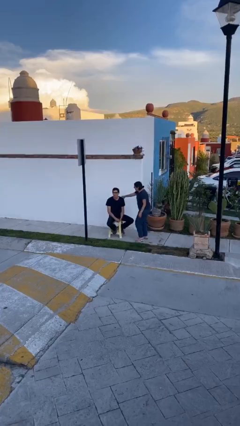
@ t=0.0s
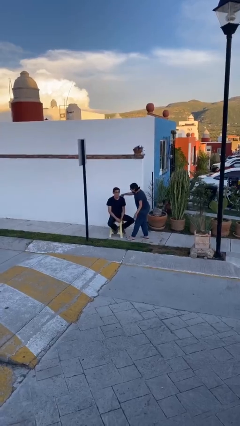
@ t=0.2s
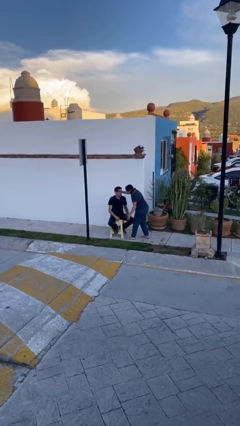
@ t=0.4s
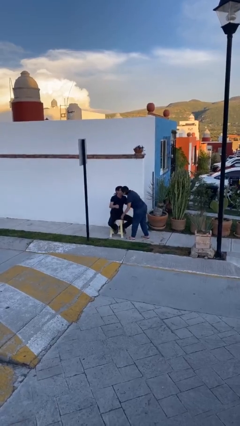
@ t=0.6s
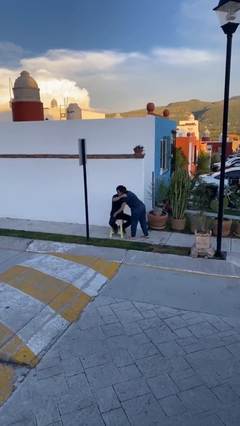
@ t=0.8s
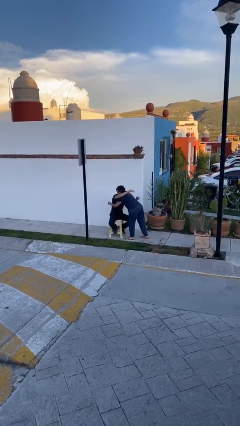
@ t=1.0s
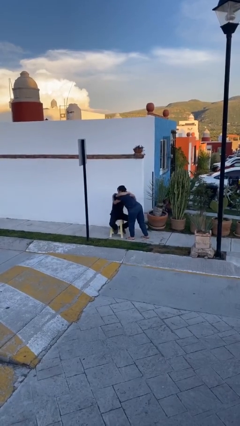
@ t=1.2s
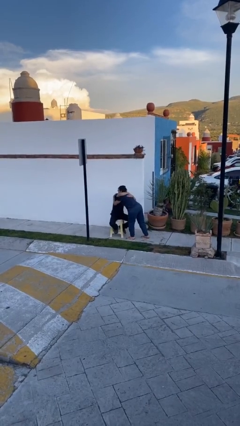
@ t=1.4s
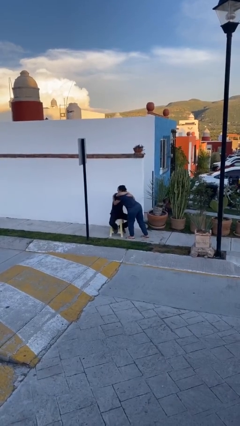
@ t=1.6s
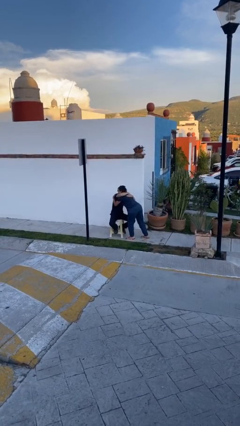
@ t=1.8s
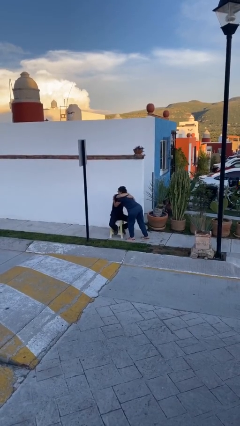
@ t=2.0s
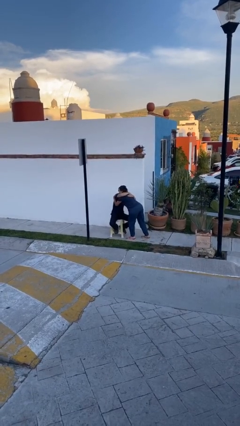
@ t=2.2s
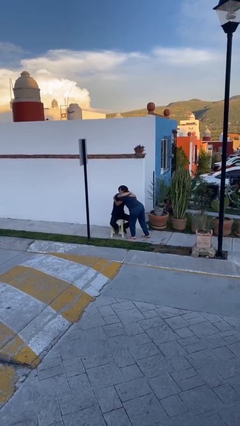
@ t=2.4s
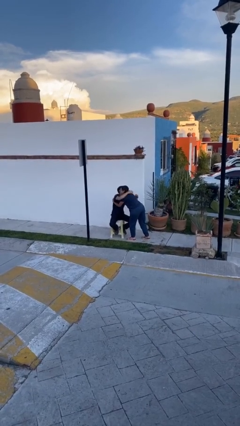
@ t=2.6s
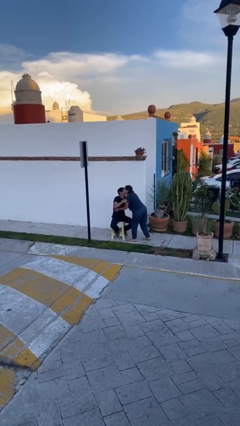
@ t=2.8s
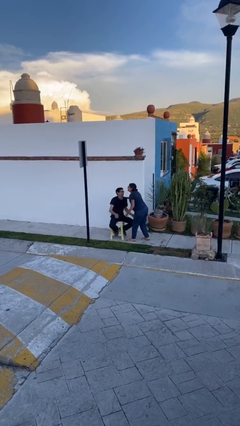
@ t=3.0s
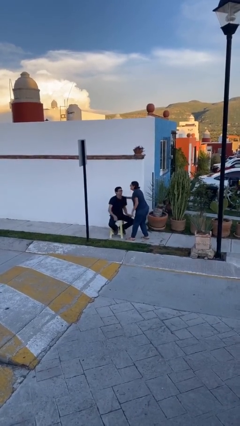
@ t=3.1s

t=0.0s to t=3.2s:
person embraces person

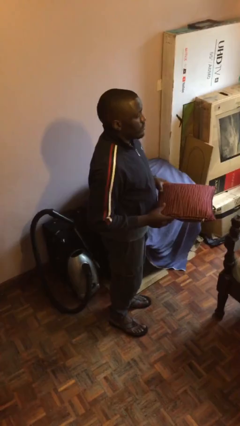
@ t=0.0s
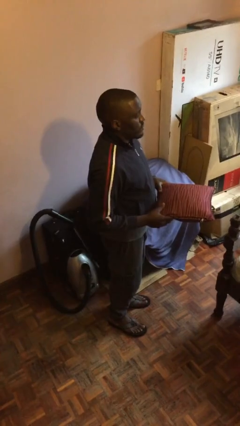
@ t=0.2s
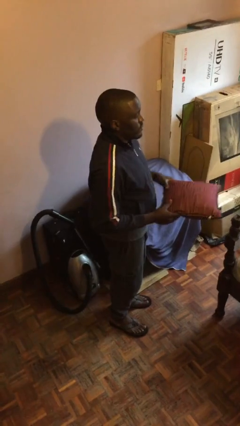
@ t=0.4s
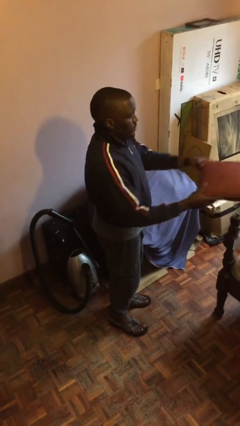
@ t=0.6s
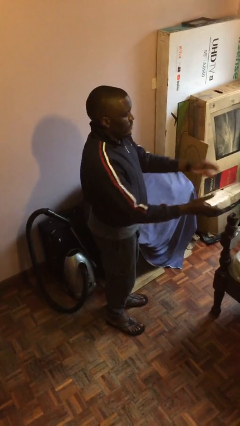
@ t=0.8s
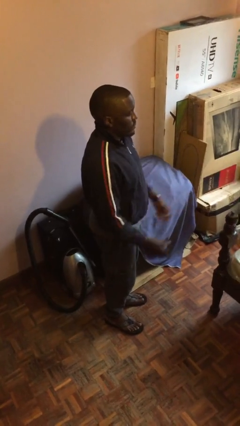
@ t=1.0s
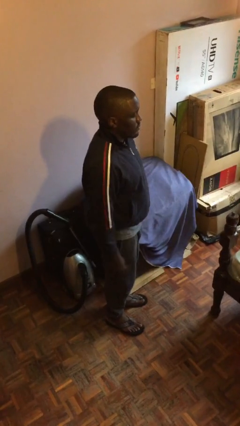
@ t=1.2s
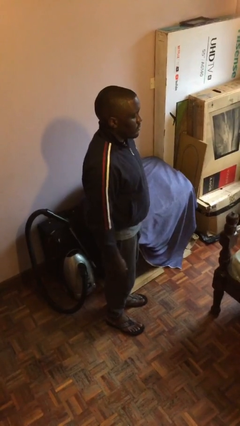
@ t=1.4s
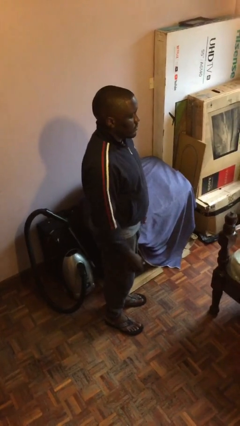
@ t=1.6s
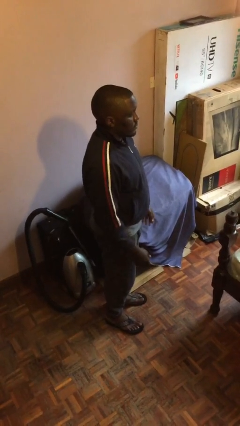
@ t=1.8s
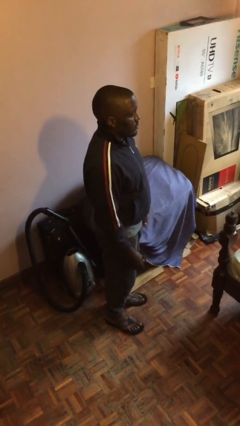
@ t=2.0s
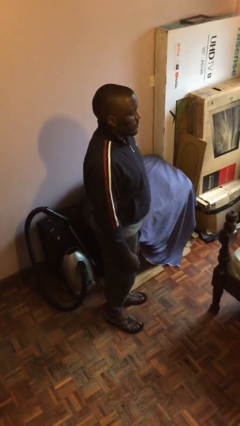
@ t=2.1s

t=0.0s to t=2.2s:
person throws object on bed

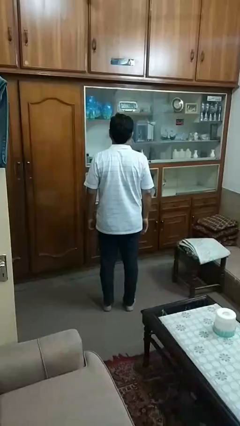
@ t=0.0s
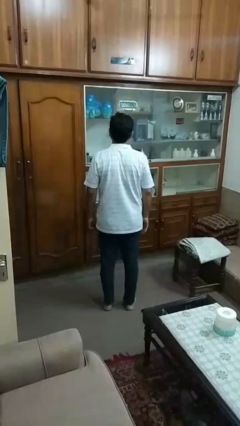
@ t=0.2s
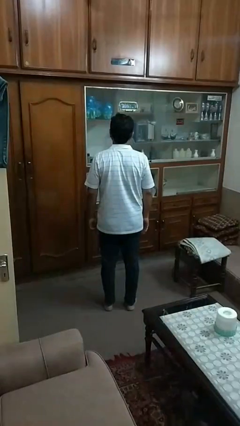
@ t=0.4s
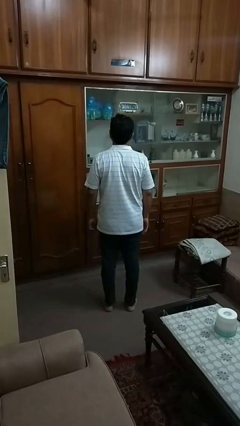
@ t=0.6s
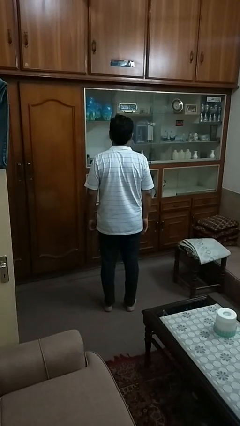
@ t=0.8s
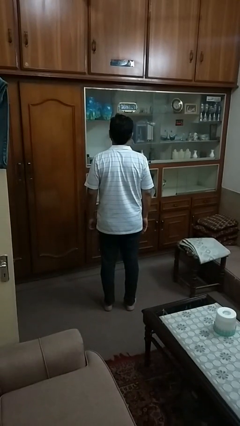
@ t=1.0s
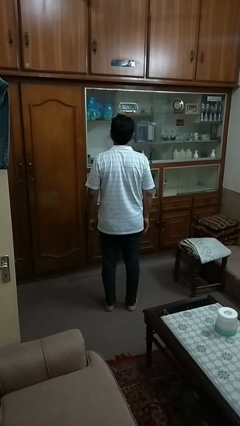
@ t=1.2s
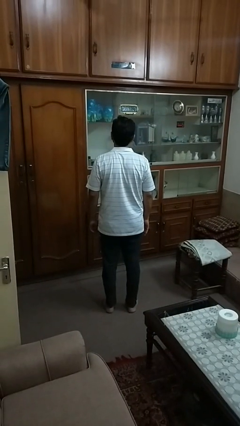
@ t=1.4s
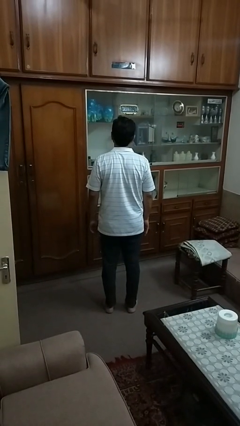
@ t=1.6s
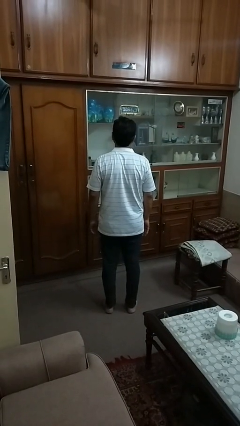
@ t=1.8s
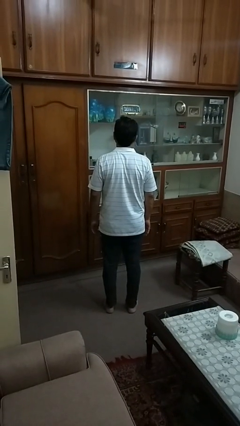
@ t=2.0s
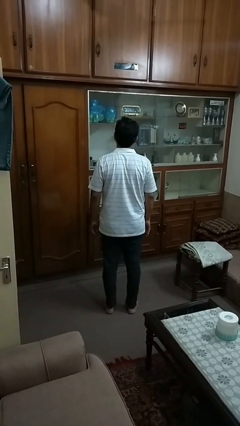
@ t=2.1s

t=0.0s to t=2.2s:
person wiggles hips

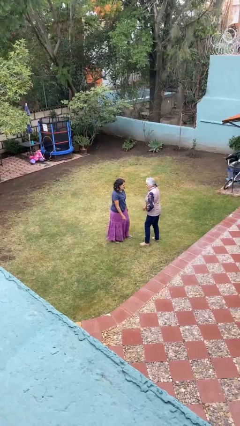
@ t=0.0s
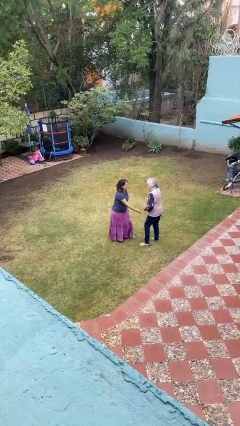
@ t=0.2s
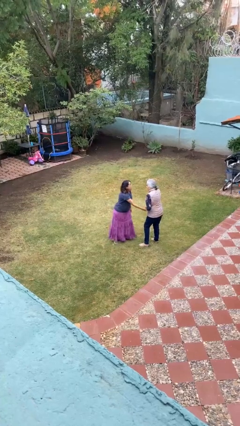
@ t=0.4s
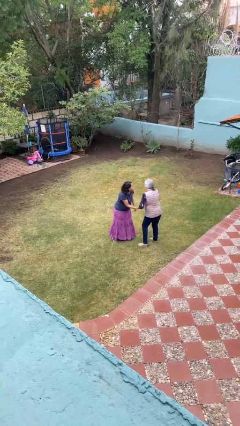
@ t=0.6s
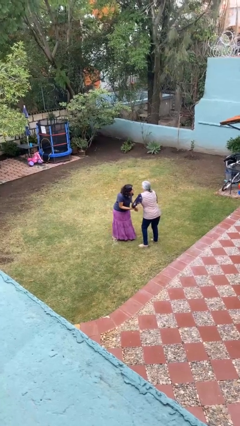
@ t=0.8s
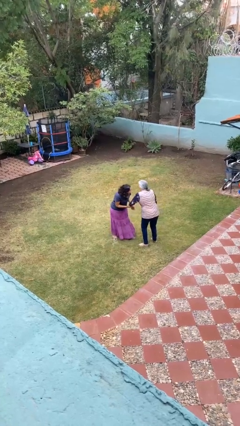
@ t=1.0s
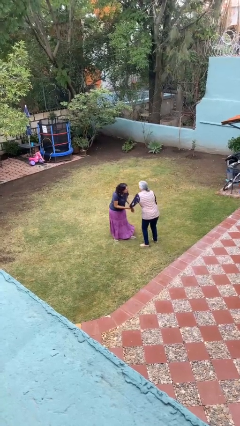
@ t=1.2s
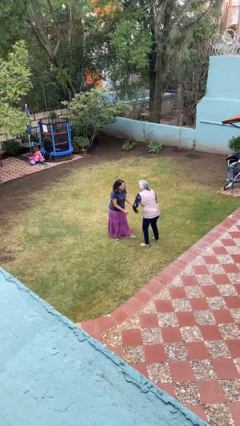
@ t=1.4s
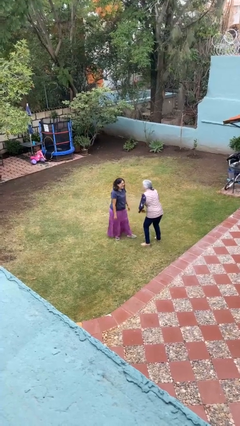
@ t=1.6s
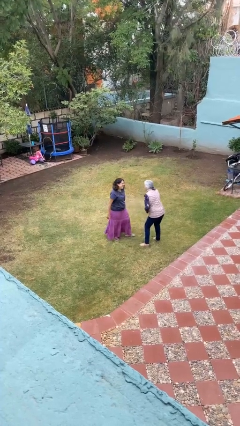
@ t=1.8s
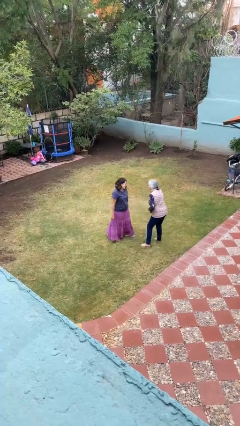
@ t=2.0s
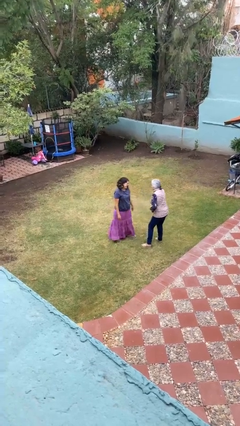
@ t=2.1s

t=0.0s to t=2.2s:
person grabs person by forearm

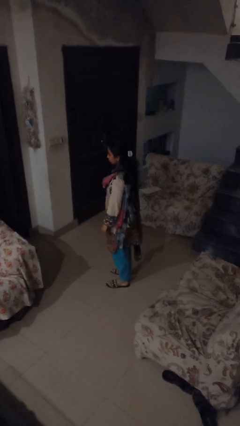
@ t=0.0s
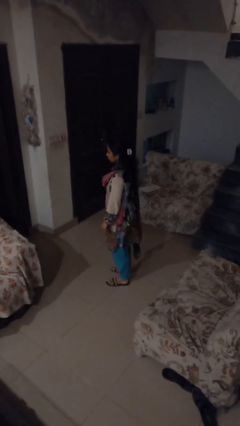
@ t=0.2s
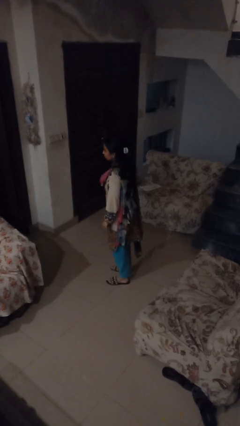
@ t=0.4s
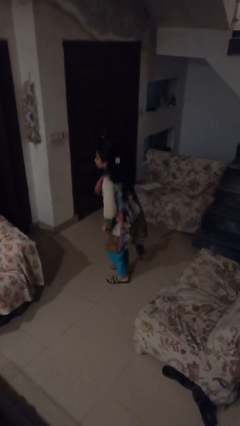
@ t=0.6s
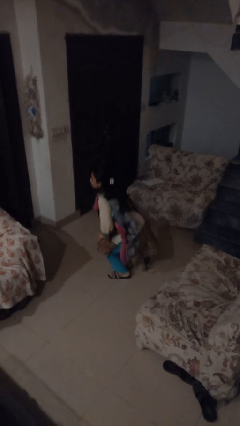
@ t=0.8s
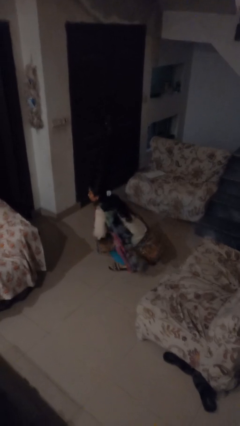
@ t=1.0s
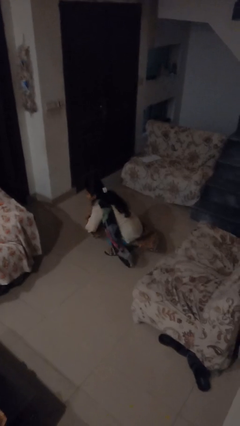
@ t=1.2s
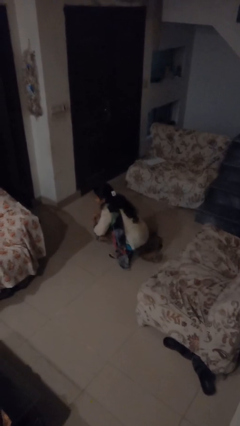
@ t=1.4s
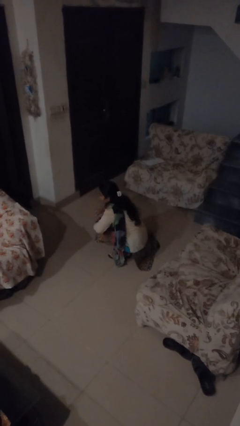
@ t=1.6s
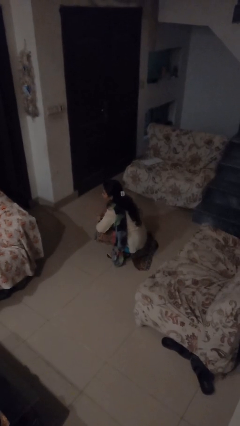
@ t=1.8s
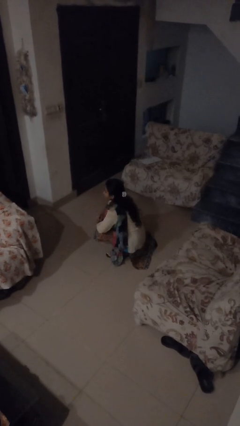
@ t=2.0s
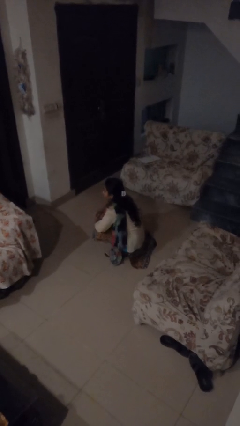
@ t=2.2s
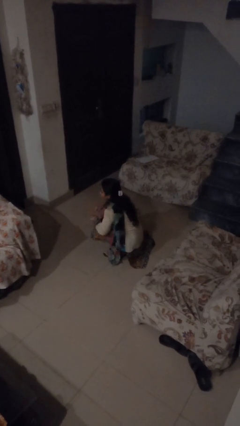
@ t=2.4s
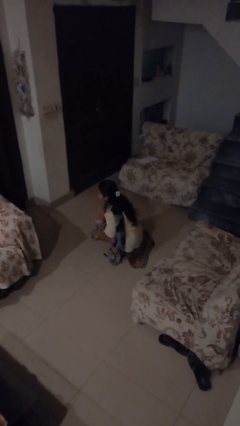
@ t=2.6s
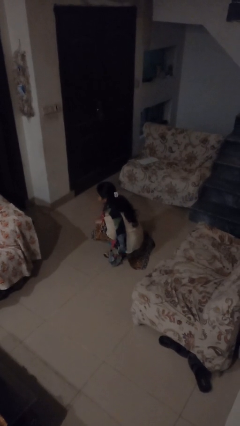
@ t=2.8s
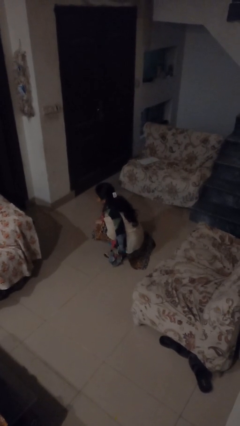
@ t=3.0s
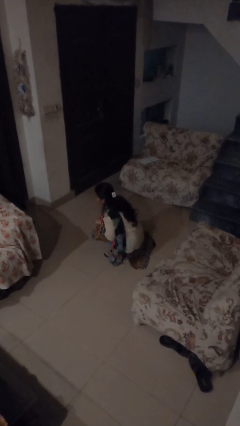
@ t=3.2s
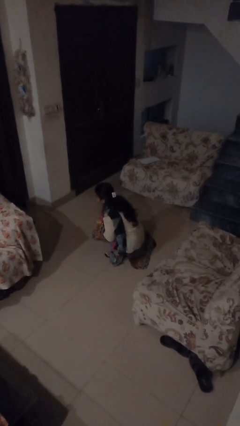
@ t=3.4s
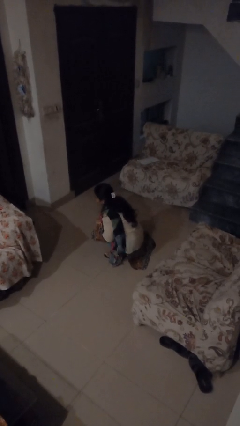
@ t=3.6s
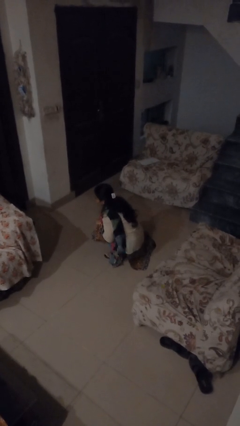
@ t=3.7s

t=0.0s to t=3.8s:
person squats

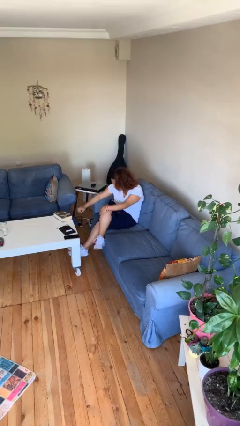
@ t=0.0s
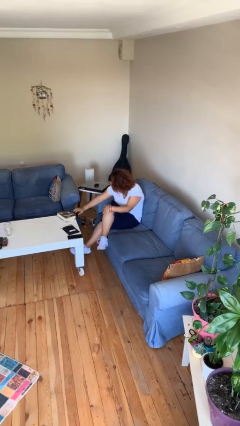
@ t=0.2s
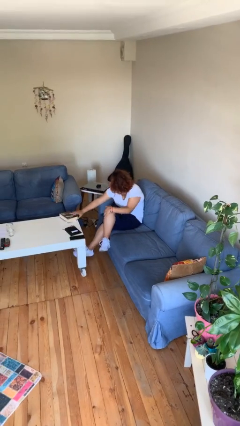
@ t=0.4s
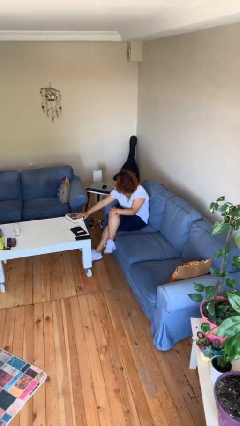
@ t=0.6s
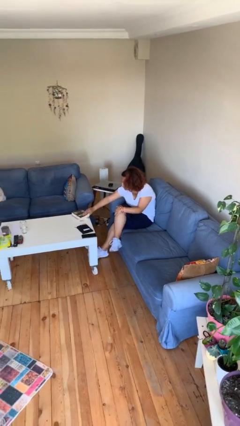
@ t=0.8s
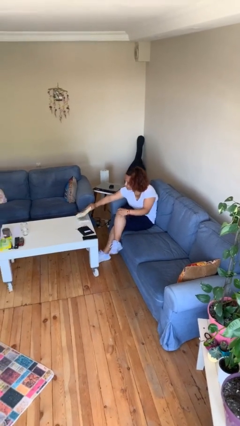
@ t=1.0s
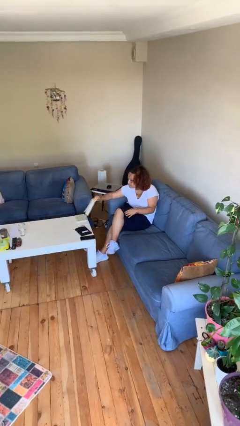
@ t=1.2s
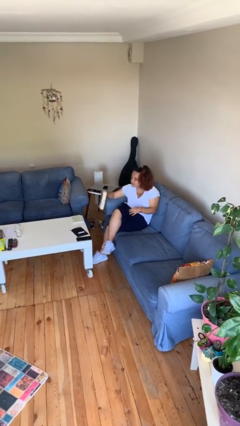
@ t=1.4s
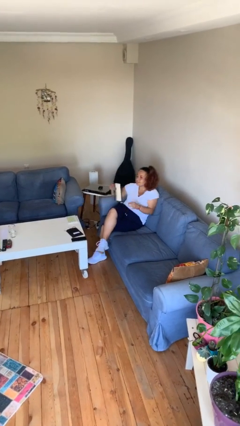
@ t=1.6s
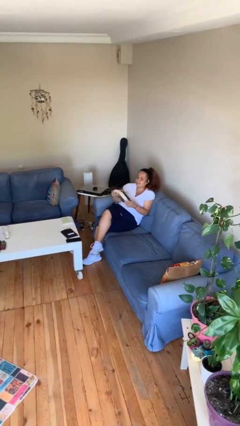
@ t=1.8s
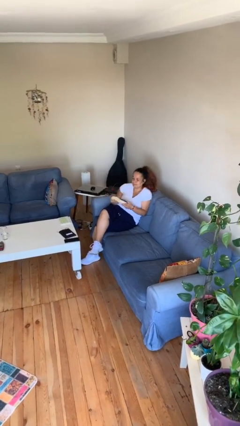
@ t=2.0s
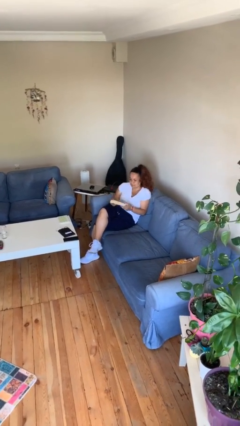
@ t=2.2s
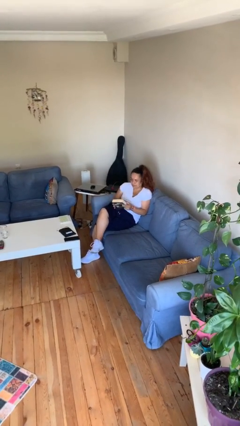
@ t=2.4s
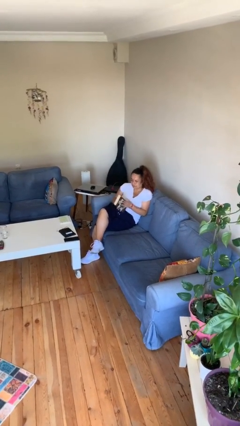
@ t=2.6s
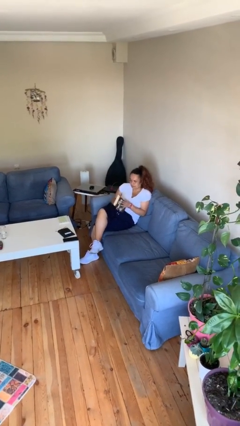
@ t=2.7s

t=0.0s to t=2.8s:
person picks up object from table

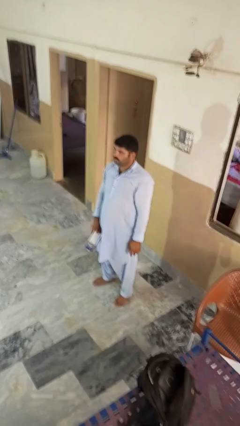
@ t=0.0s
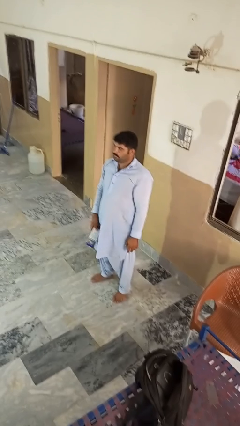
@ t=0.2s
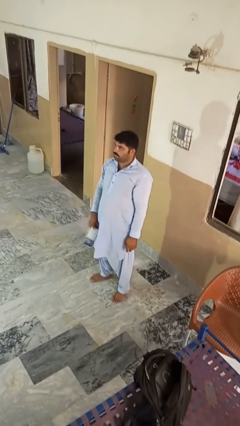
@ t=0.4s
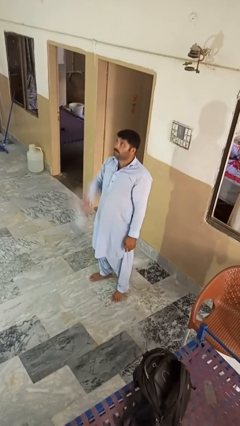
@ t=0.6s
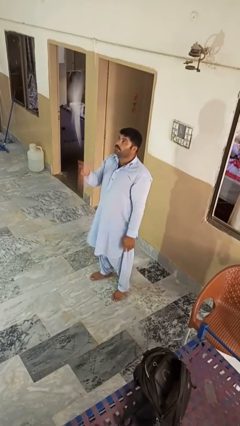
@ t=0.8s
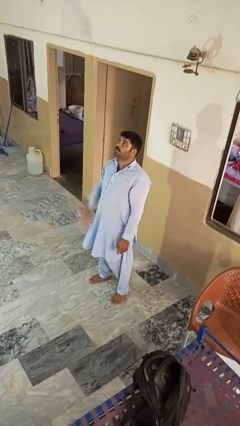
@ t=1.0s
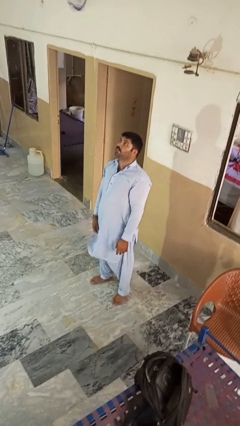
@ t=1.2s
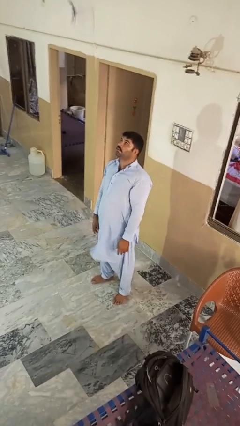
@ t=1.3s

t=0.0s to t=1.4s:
person drops object
